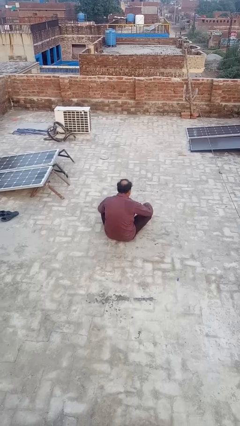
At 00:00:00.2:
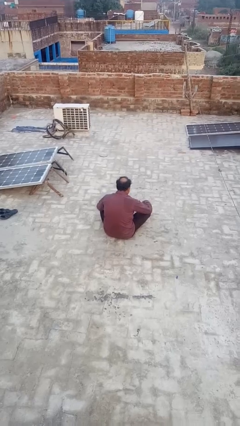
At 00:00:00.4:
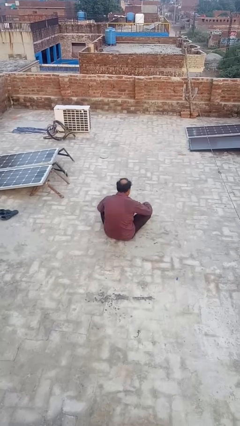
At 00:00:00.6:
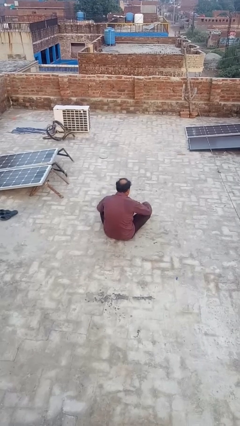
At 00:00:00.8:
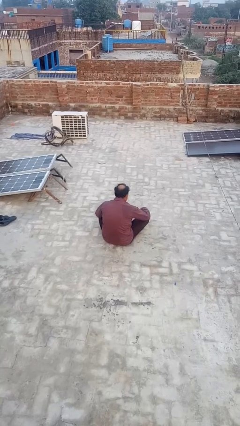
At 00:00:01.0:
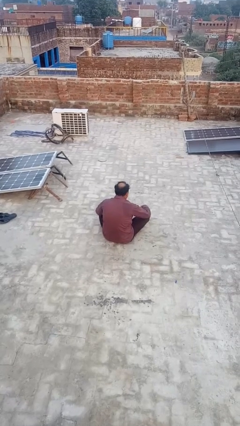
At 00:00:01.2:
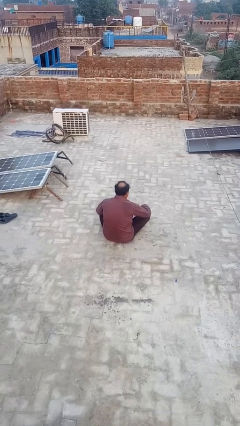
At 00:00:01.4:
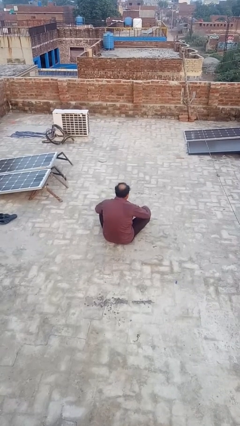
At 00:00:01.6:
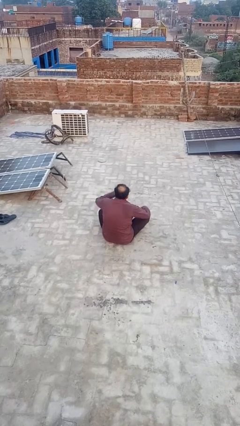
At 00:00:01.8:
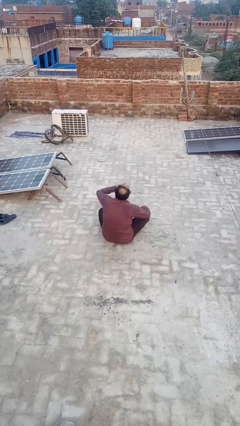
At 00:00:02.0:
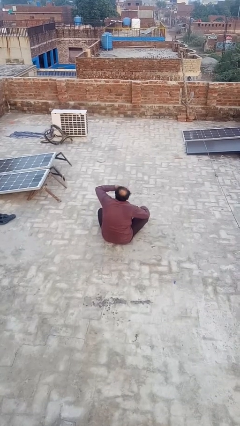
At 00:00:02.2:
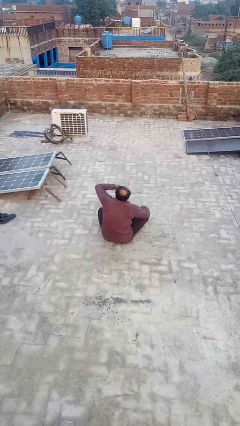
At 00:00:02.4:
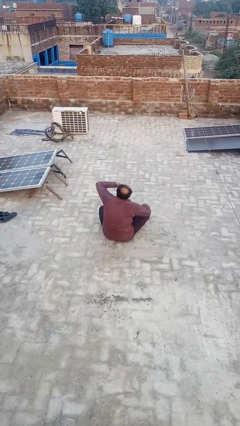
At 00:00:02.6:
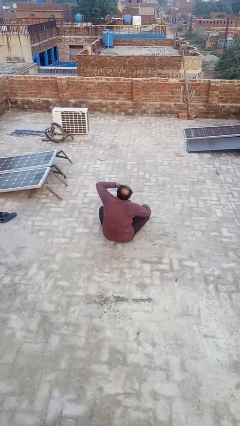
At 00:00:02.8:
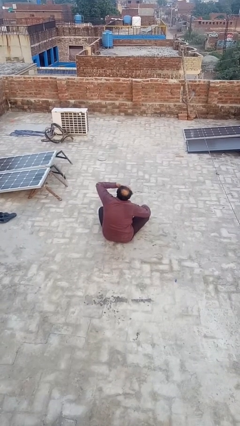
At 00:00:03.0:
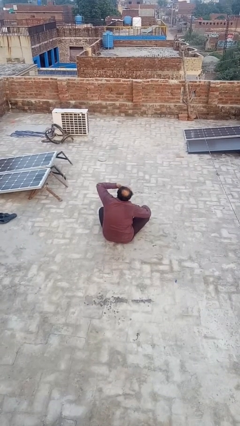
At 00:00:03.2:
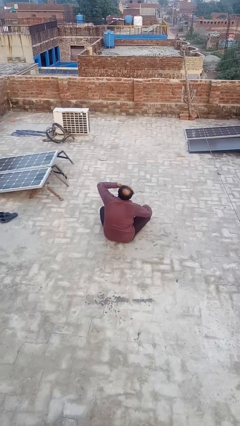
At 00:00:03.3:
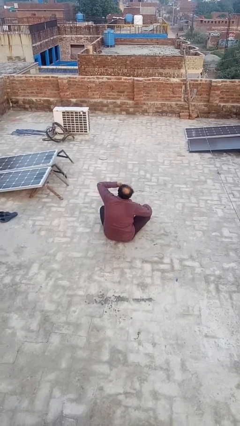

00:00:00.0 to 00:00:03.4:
person yawns

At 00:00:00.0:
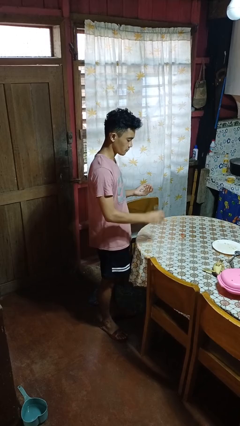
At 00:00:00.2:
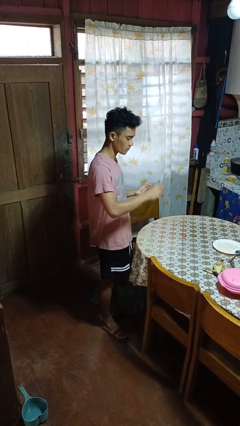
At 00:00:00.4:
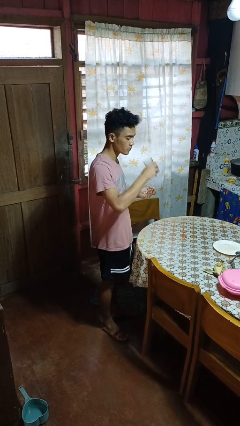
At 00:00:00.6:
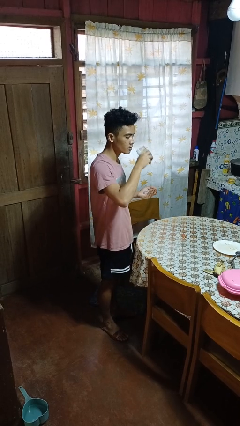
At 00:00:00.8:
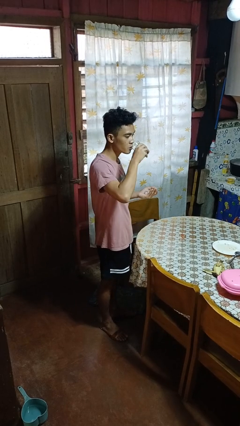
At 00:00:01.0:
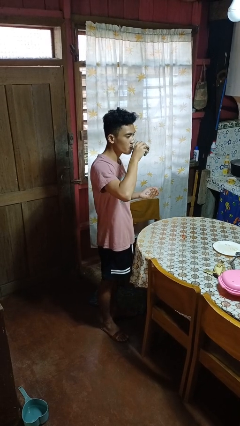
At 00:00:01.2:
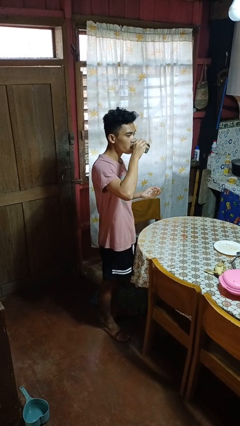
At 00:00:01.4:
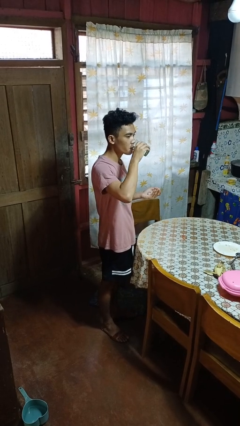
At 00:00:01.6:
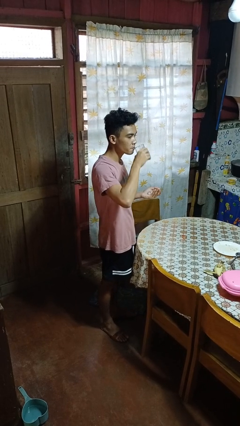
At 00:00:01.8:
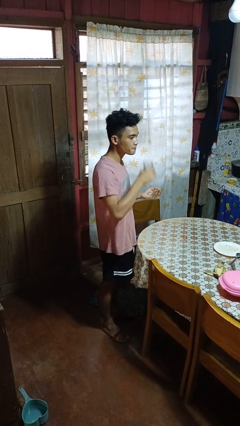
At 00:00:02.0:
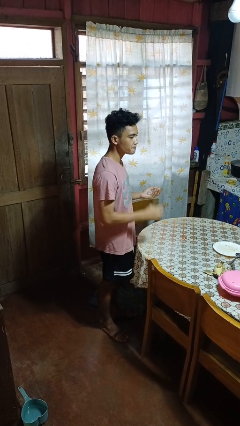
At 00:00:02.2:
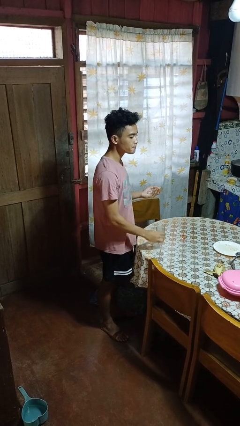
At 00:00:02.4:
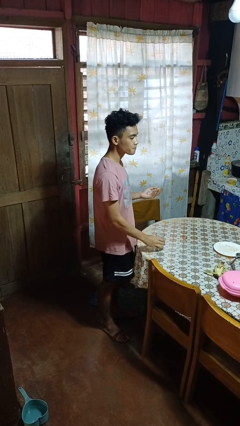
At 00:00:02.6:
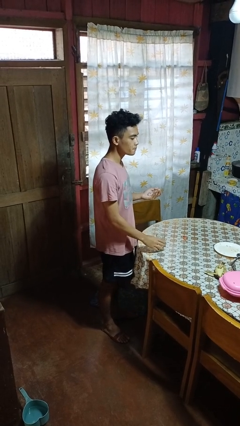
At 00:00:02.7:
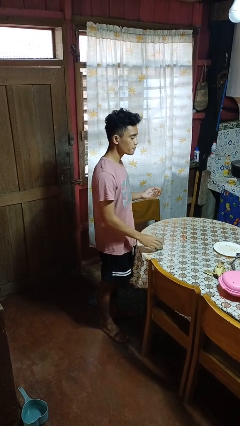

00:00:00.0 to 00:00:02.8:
person drinks from cup

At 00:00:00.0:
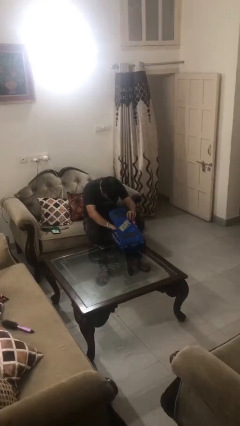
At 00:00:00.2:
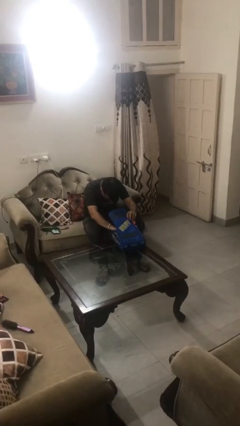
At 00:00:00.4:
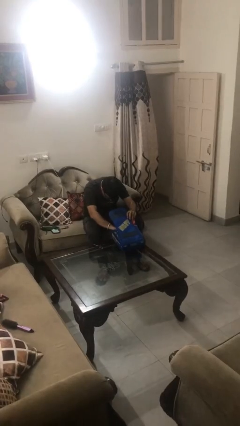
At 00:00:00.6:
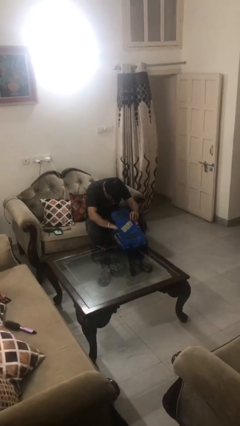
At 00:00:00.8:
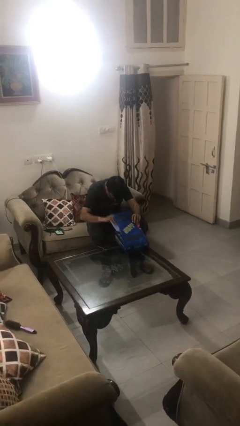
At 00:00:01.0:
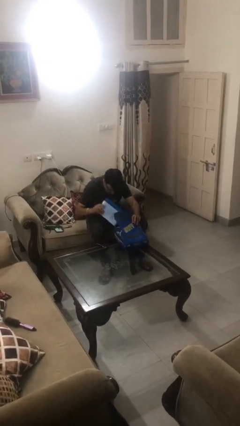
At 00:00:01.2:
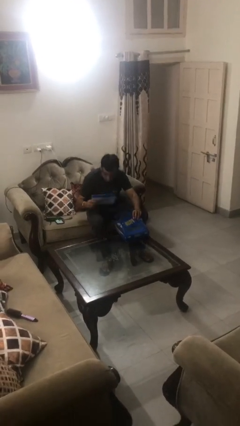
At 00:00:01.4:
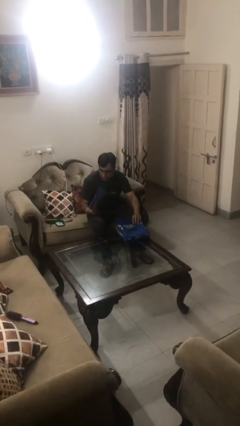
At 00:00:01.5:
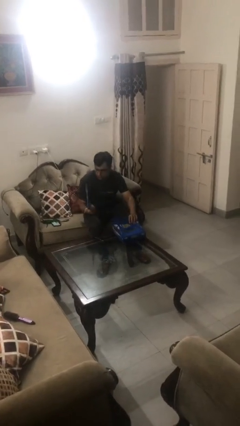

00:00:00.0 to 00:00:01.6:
person takes object from backpack

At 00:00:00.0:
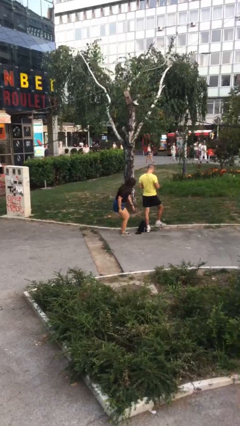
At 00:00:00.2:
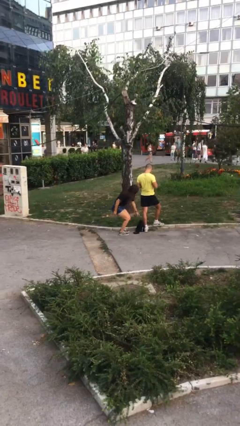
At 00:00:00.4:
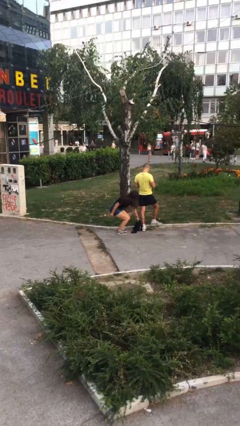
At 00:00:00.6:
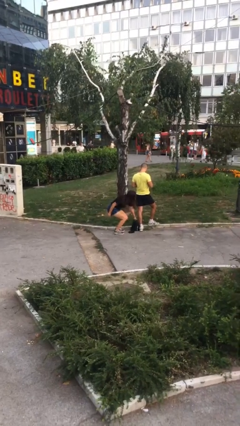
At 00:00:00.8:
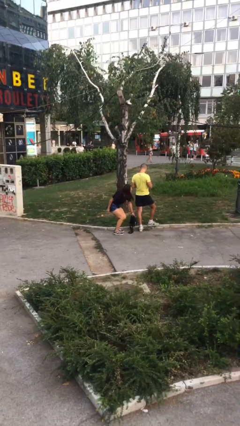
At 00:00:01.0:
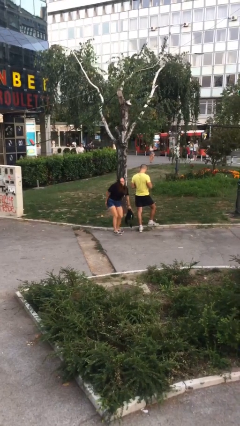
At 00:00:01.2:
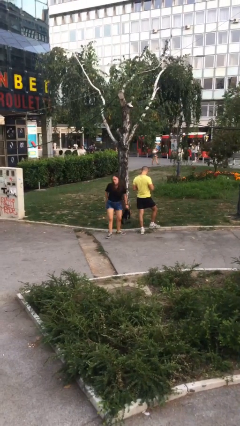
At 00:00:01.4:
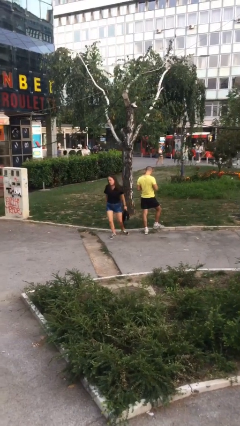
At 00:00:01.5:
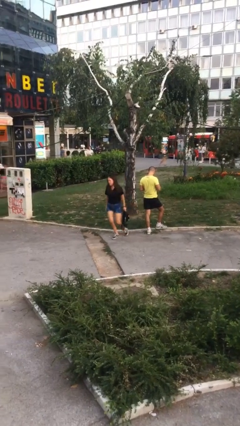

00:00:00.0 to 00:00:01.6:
person steals object from person

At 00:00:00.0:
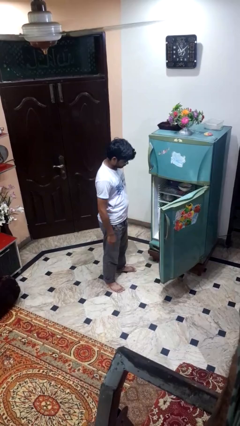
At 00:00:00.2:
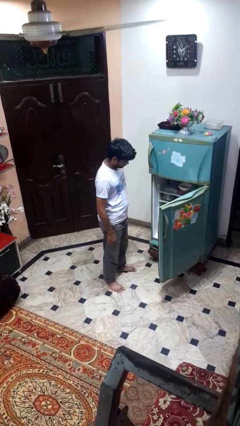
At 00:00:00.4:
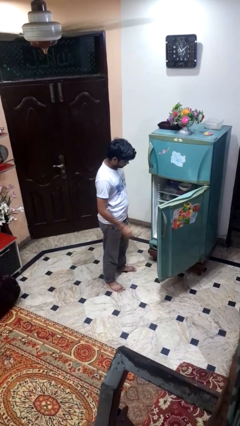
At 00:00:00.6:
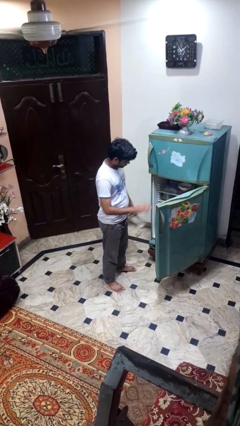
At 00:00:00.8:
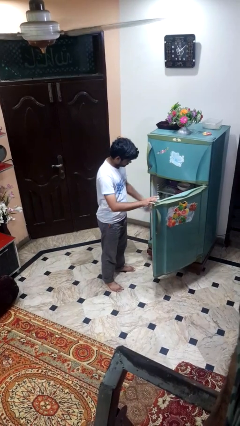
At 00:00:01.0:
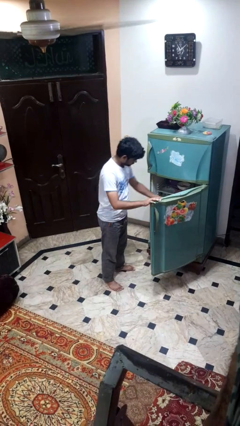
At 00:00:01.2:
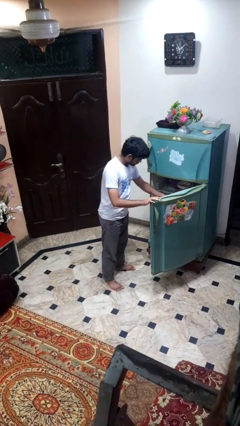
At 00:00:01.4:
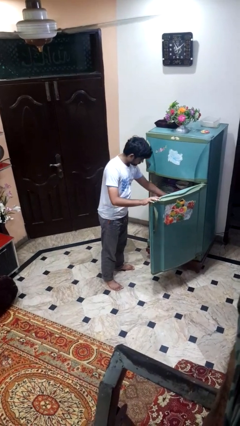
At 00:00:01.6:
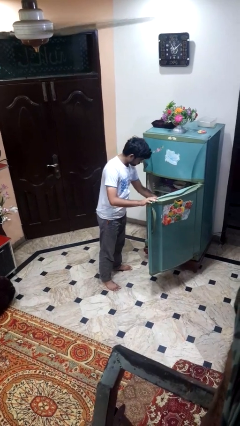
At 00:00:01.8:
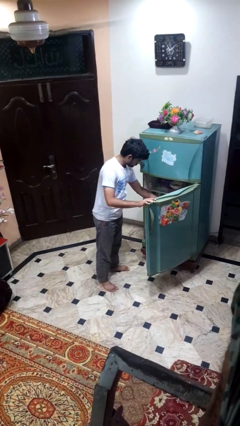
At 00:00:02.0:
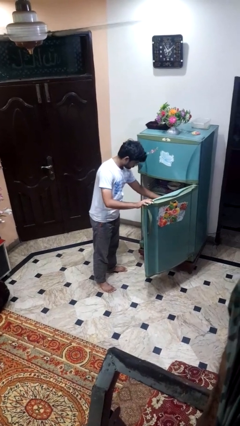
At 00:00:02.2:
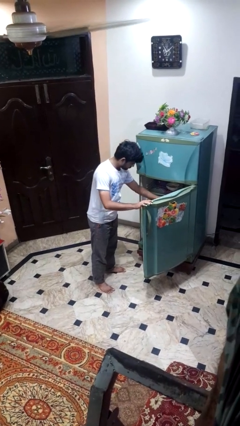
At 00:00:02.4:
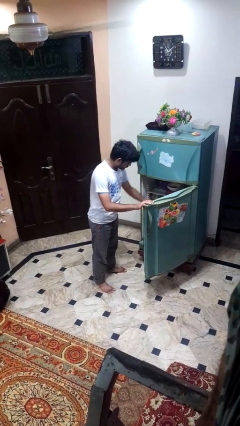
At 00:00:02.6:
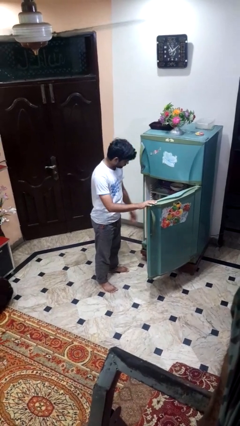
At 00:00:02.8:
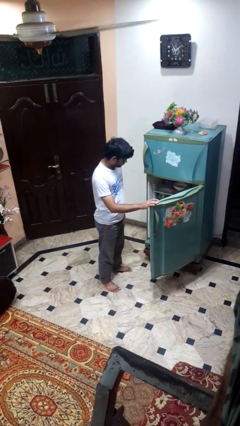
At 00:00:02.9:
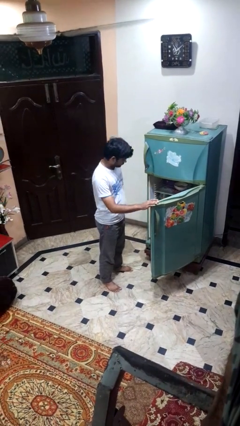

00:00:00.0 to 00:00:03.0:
person puts object into refrigerator

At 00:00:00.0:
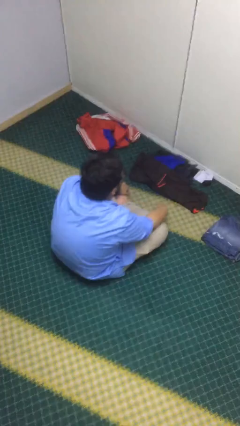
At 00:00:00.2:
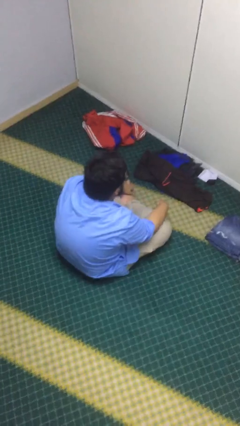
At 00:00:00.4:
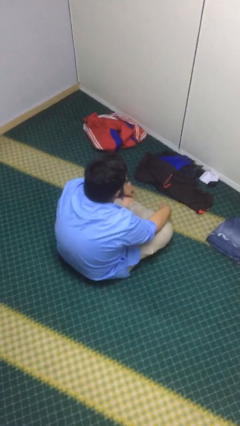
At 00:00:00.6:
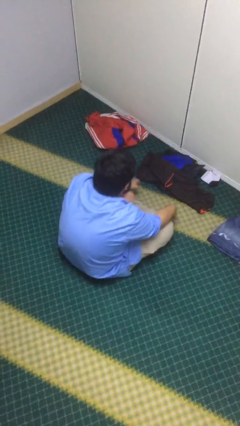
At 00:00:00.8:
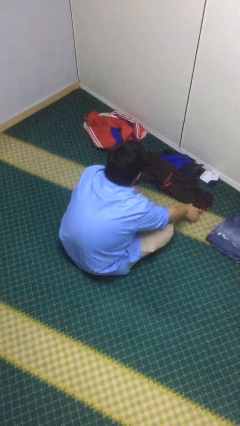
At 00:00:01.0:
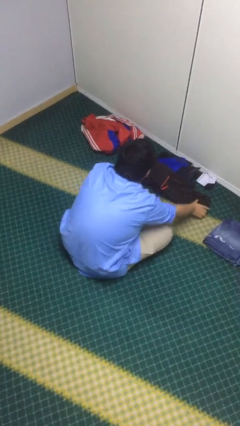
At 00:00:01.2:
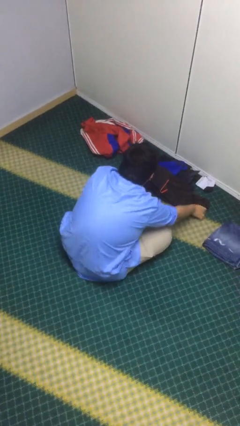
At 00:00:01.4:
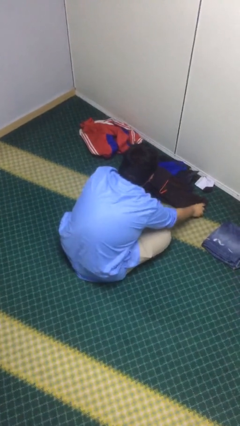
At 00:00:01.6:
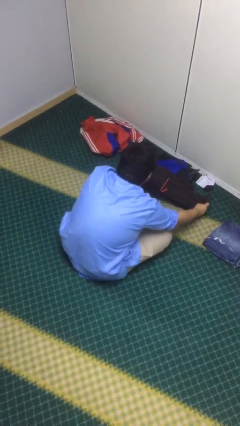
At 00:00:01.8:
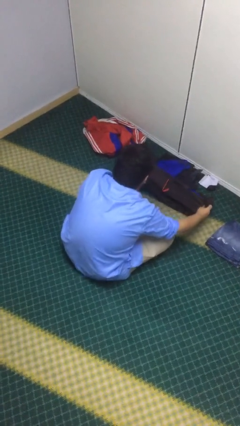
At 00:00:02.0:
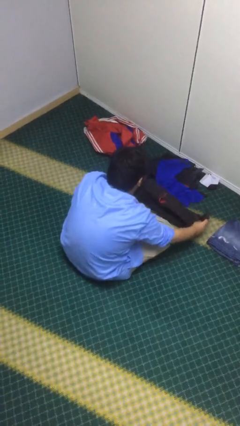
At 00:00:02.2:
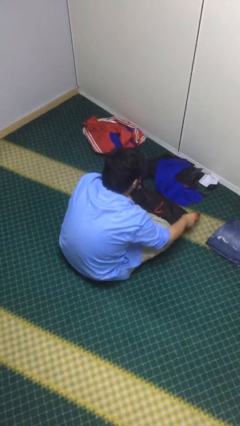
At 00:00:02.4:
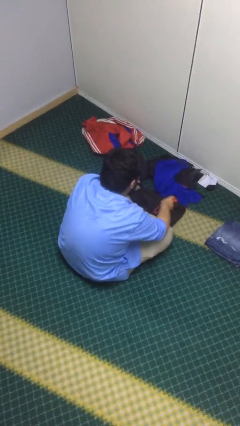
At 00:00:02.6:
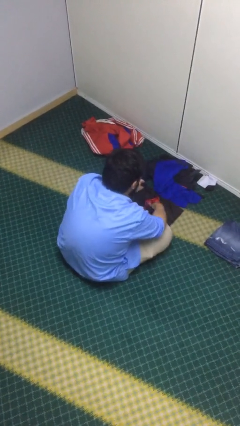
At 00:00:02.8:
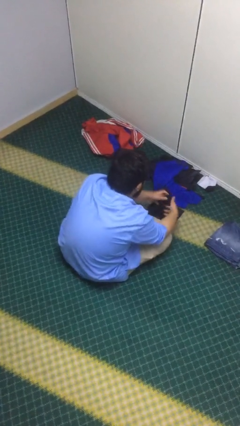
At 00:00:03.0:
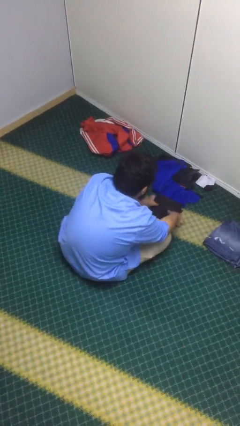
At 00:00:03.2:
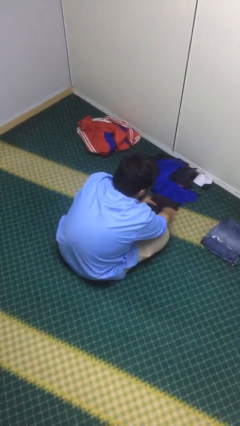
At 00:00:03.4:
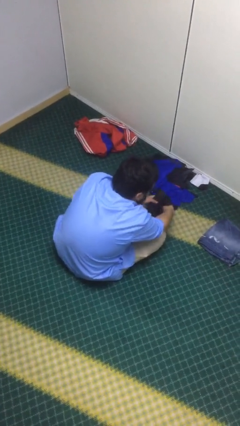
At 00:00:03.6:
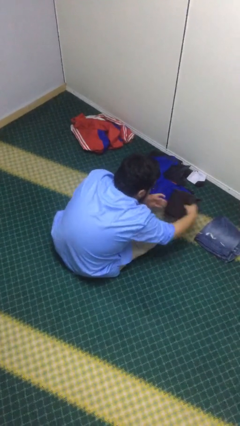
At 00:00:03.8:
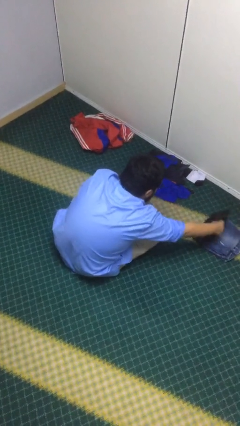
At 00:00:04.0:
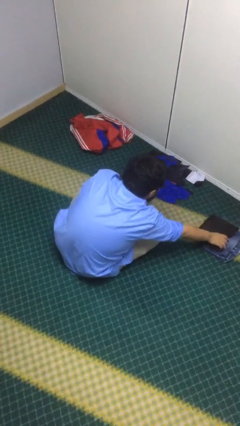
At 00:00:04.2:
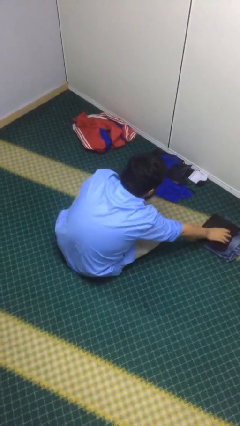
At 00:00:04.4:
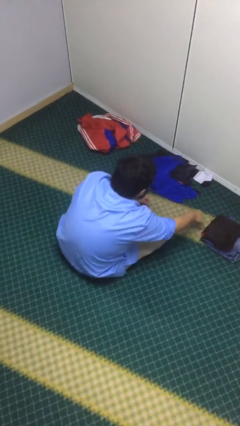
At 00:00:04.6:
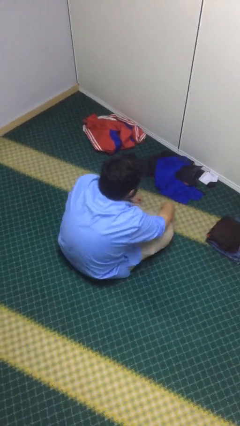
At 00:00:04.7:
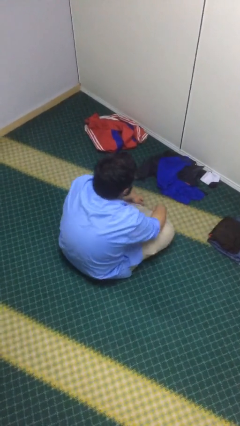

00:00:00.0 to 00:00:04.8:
person folds shirt
